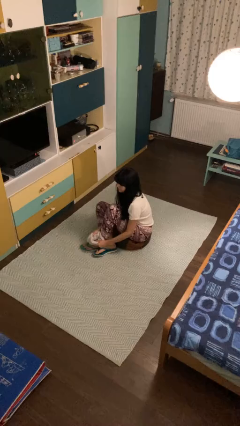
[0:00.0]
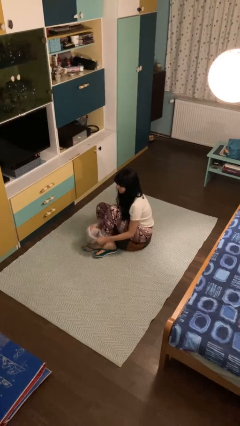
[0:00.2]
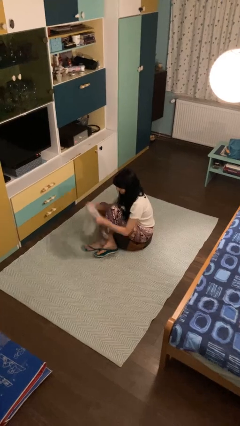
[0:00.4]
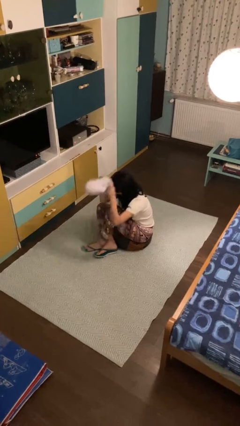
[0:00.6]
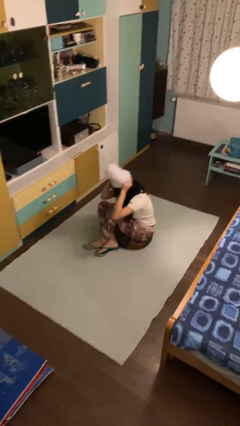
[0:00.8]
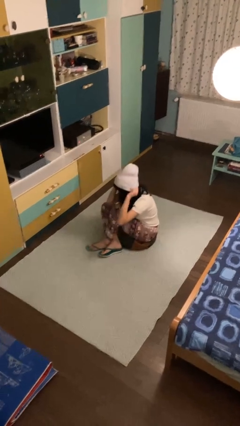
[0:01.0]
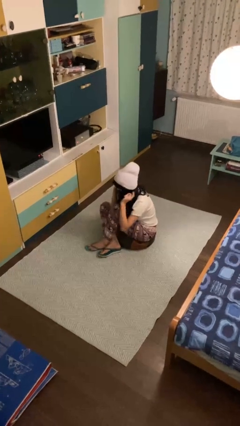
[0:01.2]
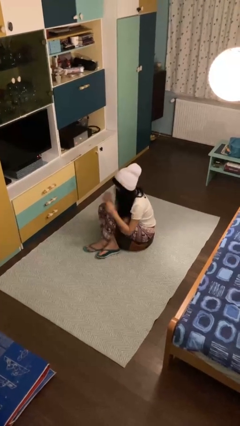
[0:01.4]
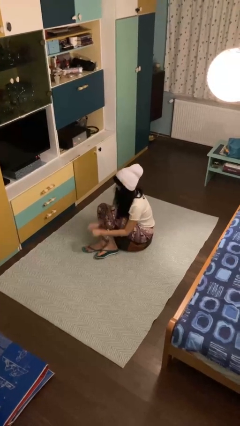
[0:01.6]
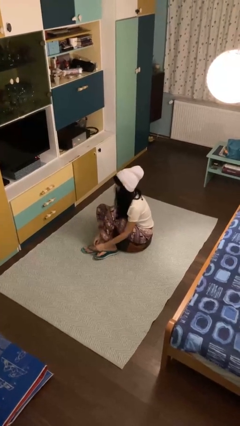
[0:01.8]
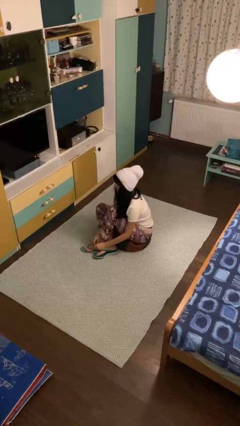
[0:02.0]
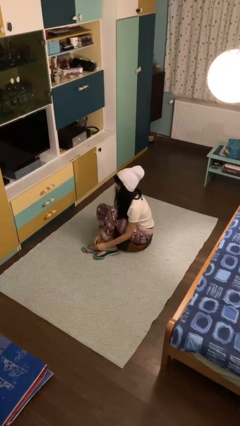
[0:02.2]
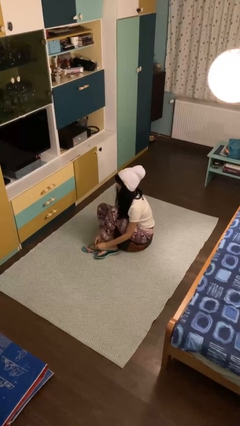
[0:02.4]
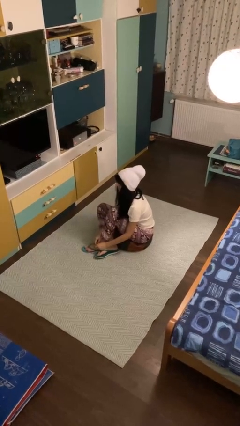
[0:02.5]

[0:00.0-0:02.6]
person puts on hat

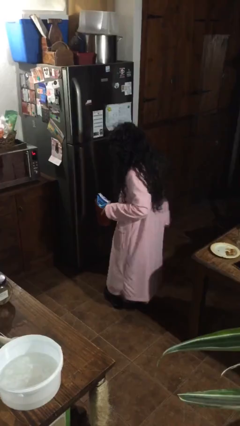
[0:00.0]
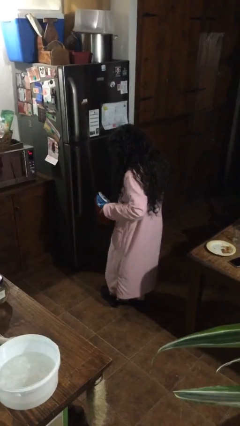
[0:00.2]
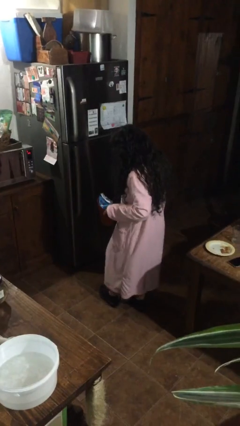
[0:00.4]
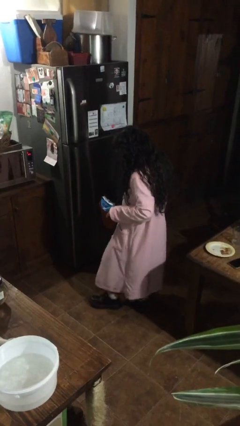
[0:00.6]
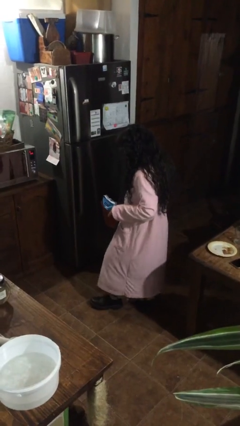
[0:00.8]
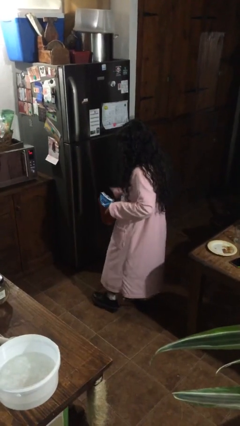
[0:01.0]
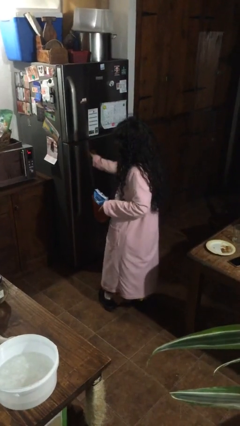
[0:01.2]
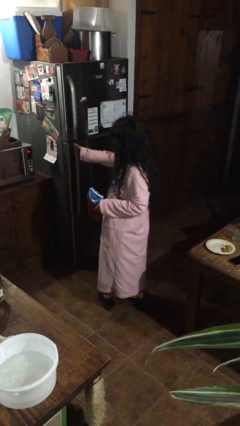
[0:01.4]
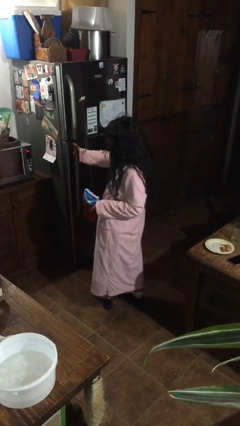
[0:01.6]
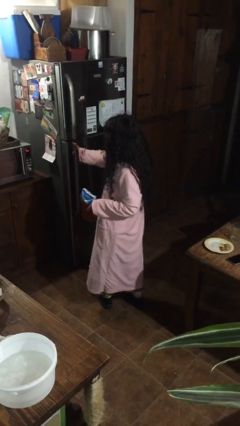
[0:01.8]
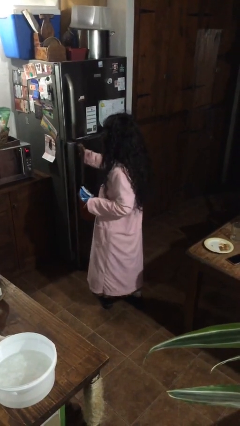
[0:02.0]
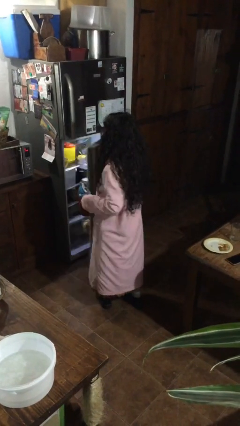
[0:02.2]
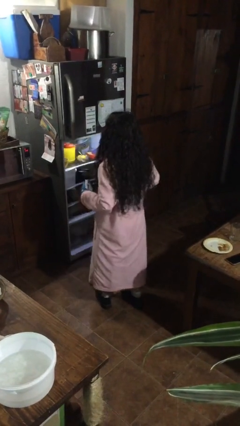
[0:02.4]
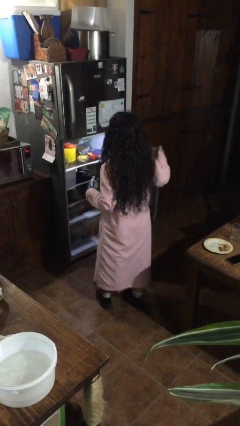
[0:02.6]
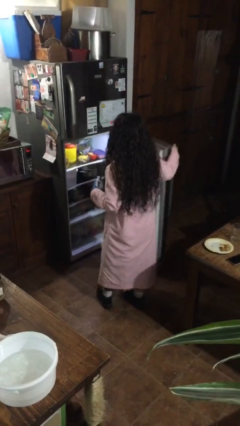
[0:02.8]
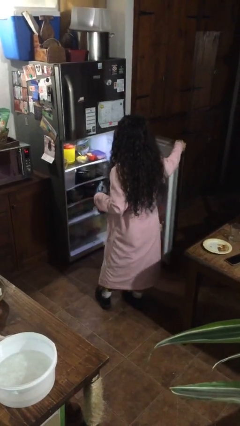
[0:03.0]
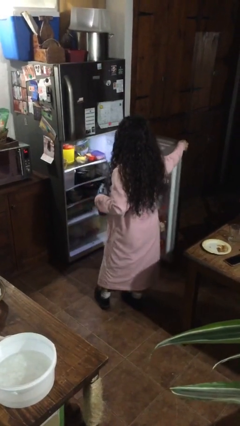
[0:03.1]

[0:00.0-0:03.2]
person opens refrigerator

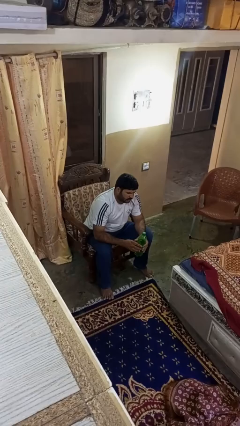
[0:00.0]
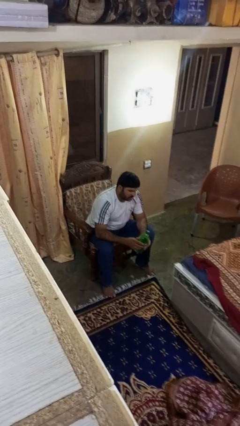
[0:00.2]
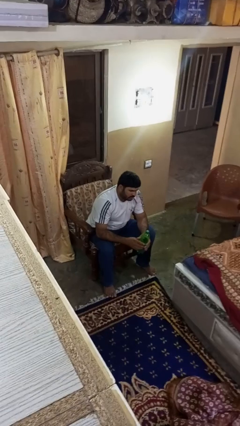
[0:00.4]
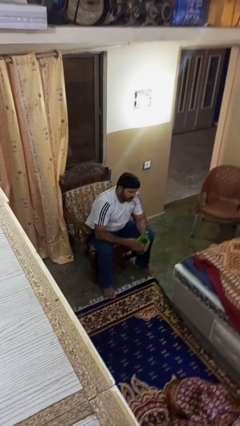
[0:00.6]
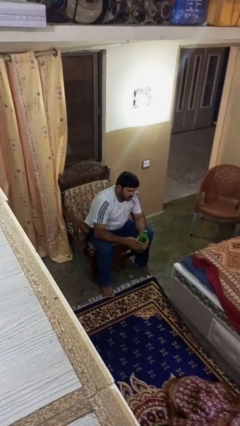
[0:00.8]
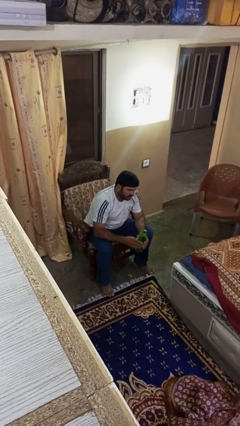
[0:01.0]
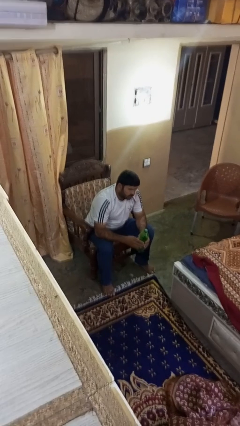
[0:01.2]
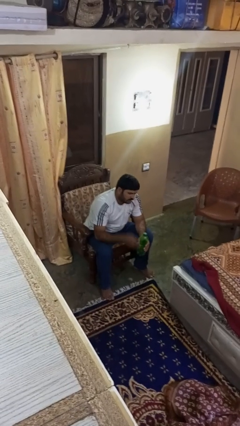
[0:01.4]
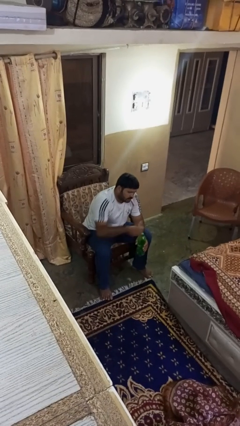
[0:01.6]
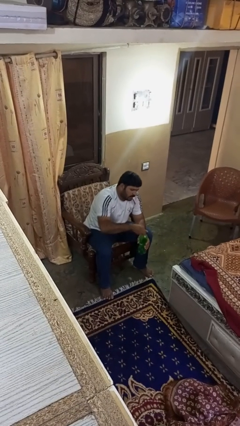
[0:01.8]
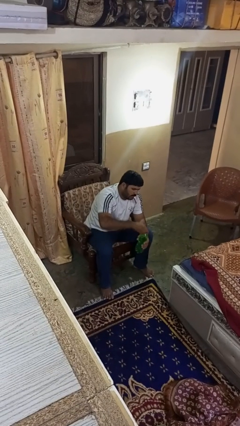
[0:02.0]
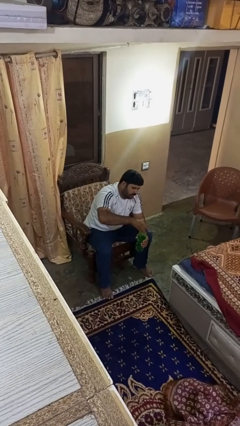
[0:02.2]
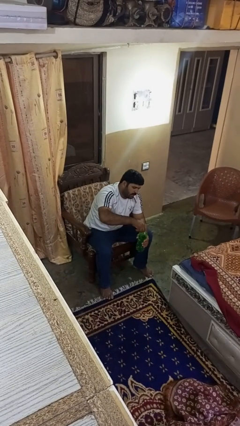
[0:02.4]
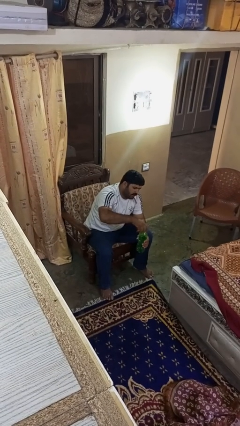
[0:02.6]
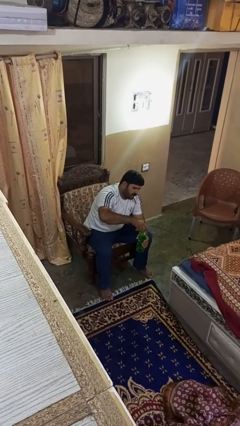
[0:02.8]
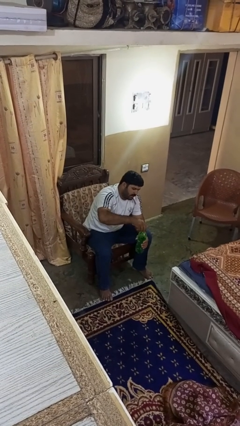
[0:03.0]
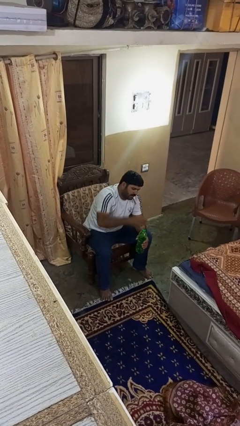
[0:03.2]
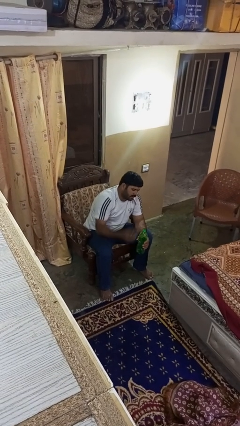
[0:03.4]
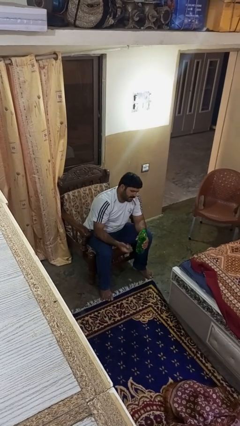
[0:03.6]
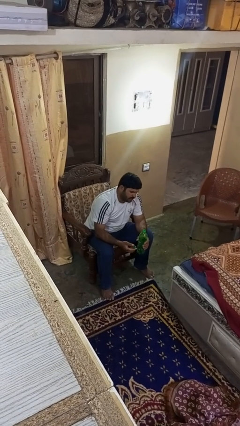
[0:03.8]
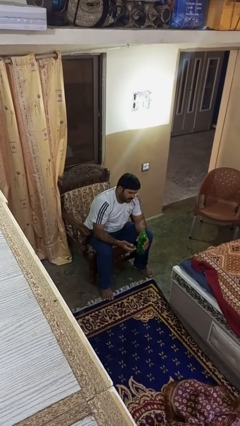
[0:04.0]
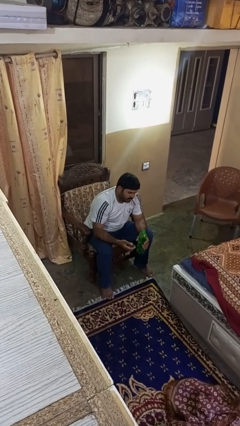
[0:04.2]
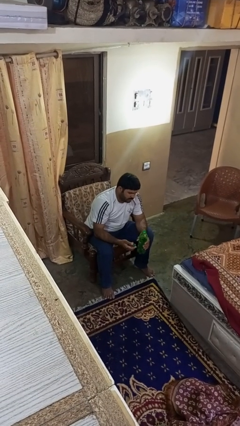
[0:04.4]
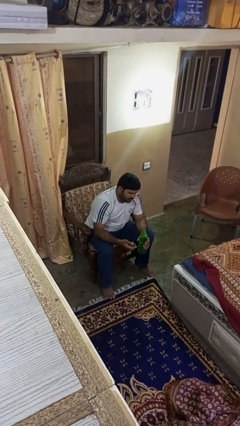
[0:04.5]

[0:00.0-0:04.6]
person unscrews lid from bottle

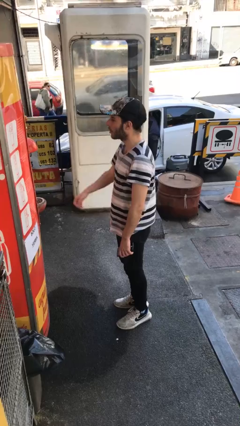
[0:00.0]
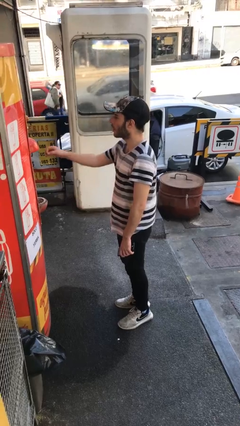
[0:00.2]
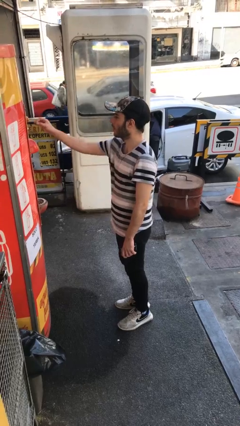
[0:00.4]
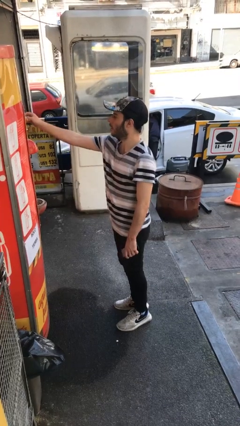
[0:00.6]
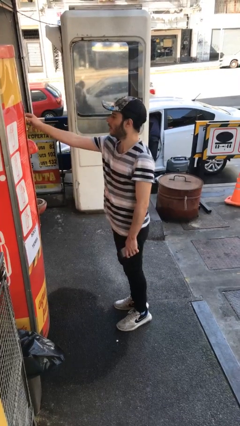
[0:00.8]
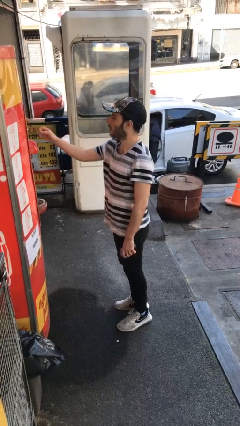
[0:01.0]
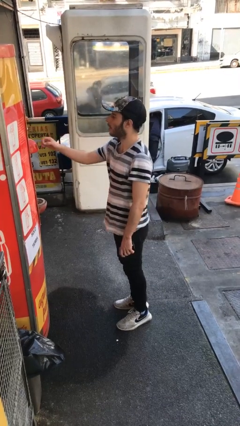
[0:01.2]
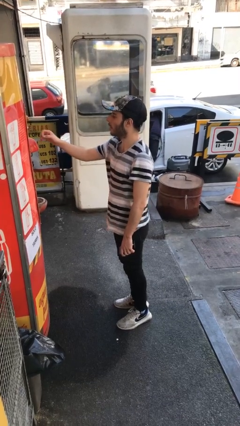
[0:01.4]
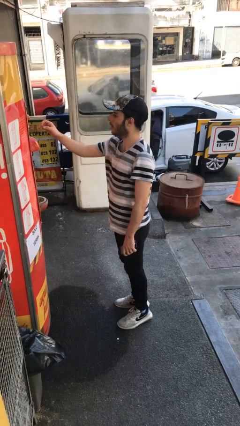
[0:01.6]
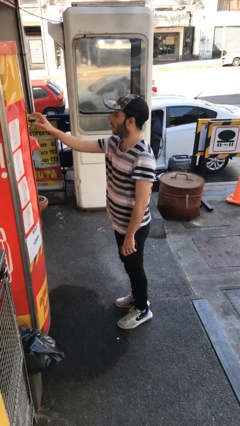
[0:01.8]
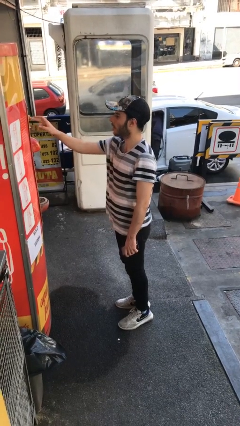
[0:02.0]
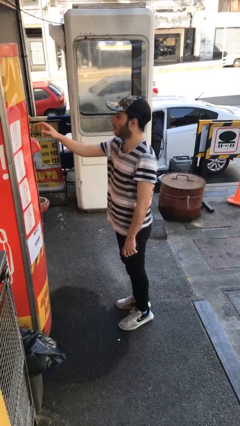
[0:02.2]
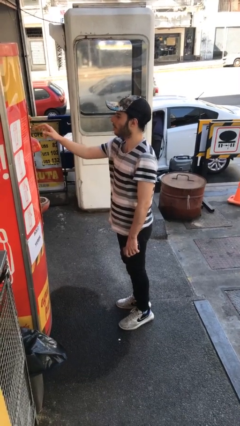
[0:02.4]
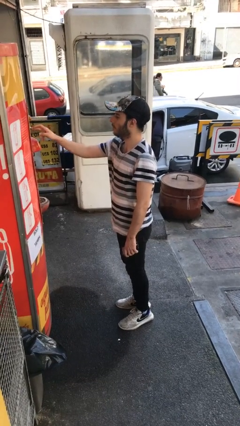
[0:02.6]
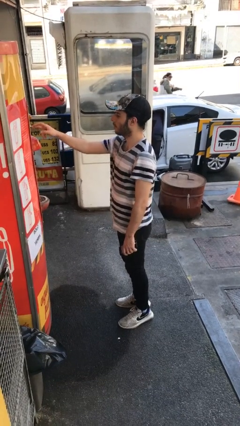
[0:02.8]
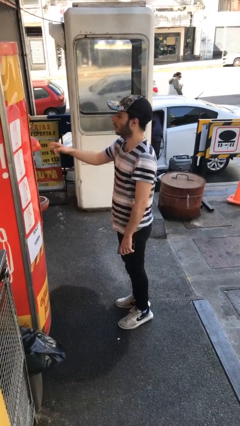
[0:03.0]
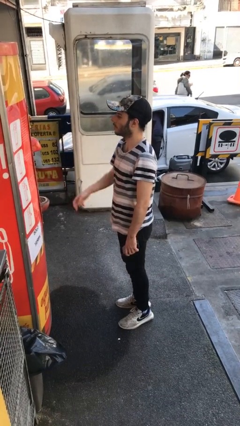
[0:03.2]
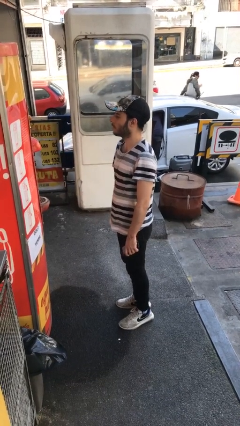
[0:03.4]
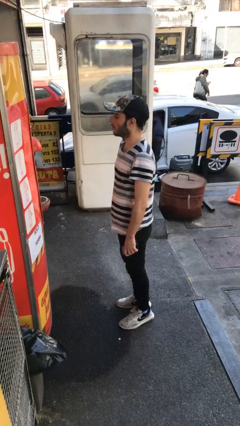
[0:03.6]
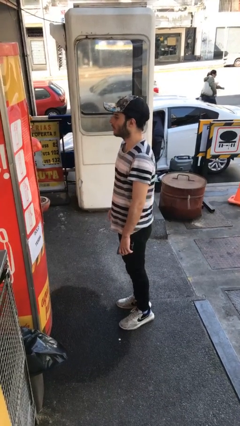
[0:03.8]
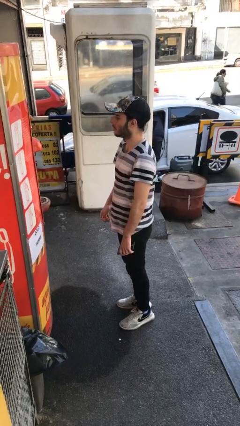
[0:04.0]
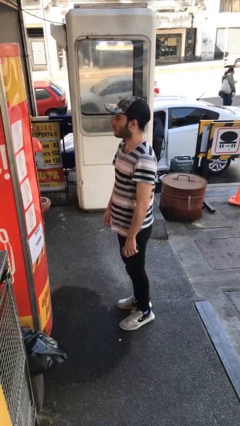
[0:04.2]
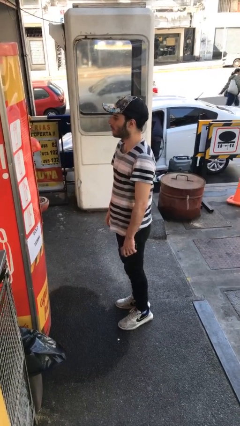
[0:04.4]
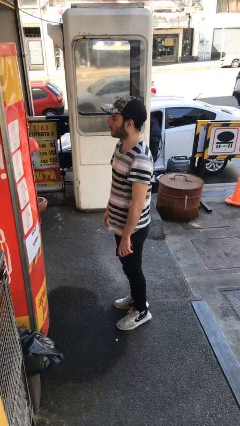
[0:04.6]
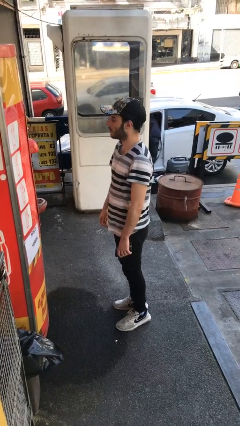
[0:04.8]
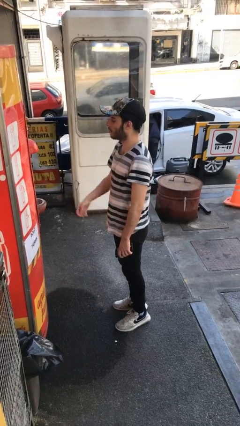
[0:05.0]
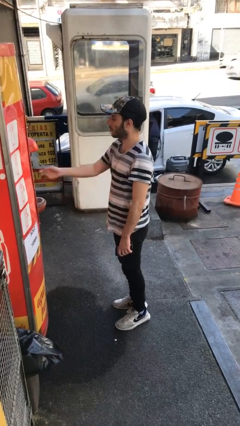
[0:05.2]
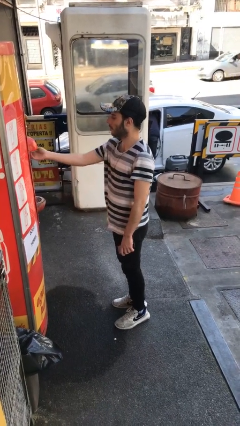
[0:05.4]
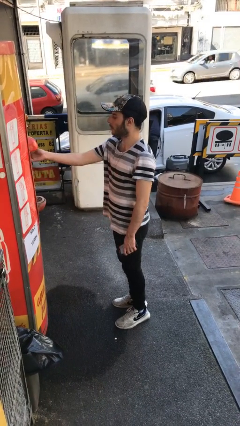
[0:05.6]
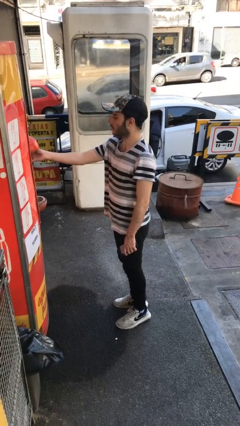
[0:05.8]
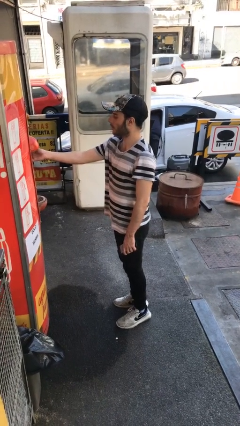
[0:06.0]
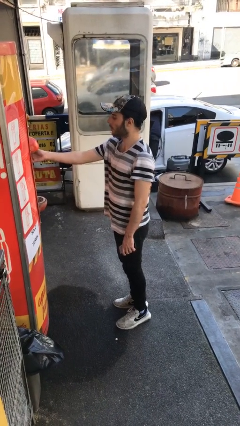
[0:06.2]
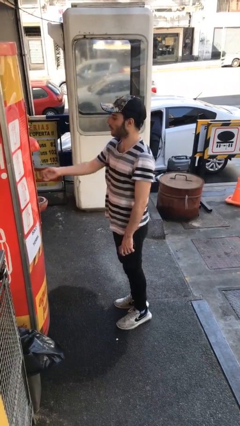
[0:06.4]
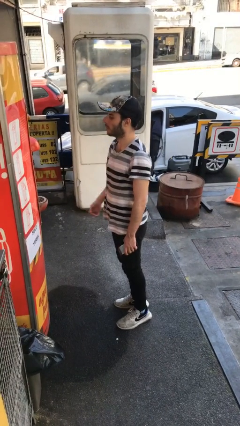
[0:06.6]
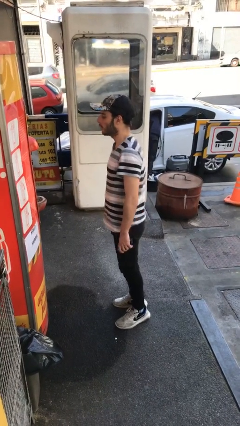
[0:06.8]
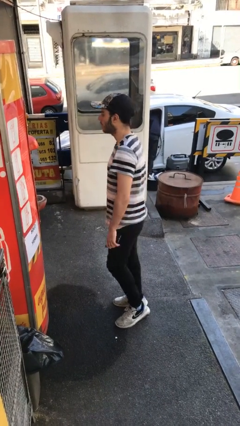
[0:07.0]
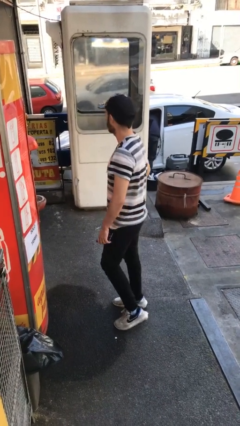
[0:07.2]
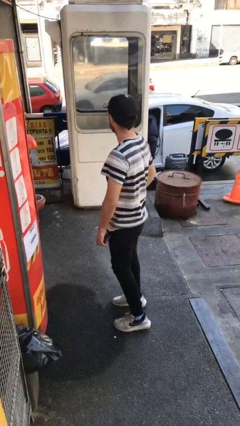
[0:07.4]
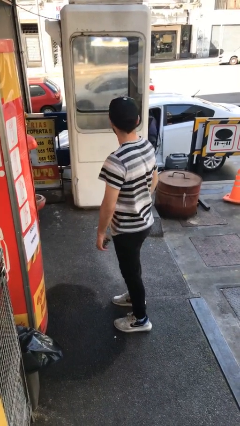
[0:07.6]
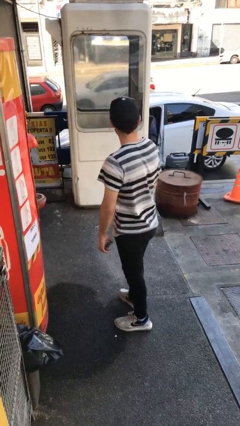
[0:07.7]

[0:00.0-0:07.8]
person purchases from machine
